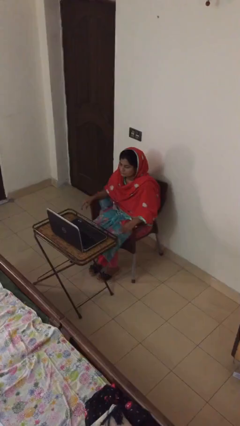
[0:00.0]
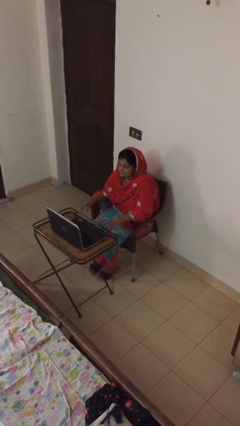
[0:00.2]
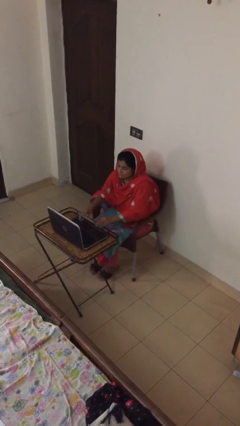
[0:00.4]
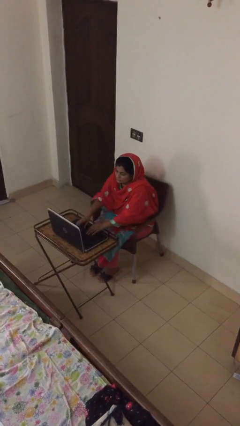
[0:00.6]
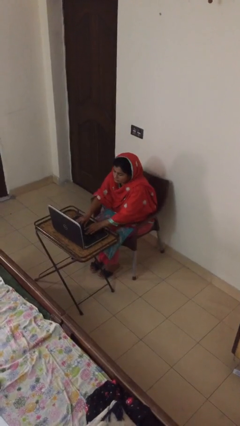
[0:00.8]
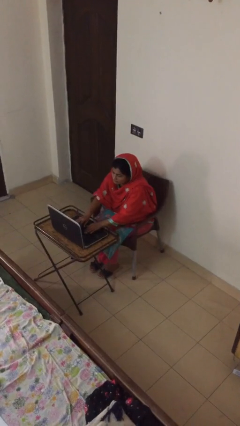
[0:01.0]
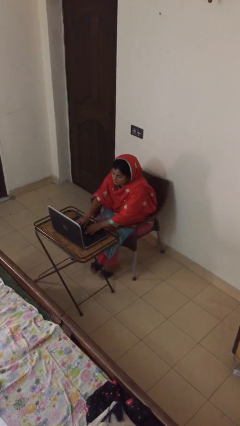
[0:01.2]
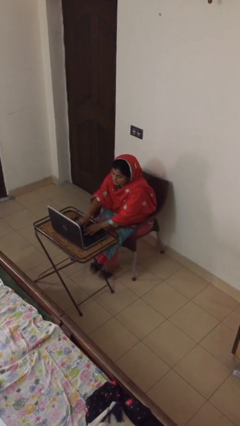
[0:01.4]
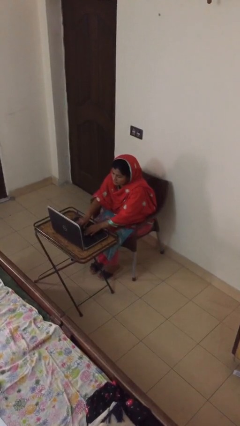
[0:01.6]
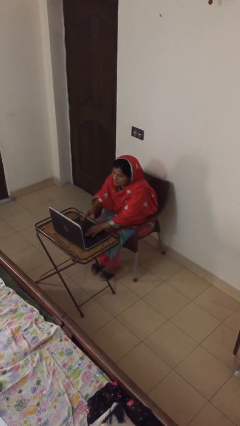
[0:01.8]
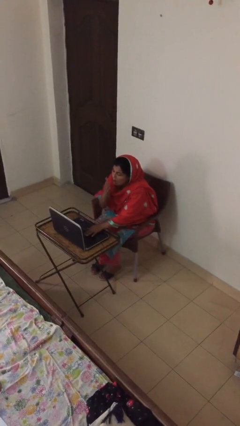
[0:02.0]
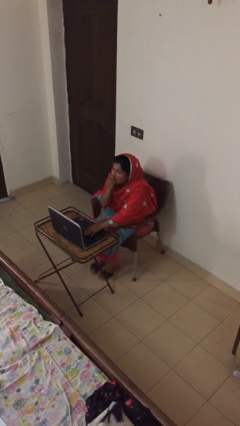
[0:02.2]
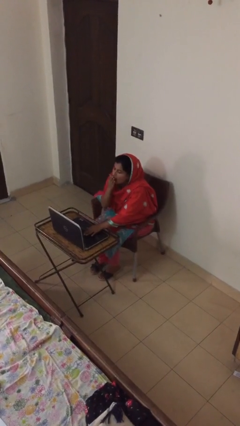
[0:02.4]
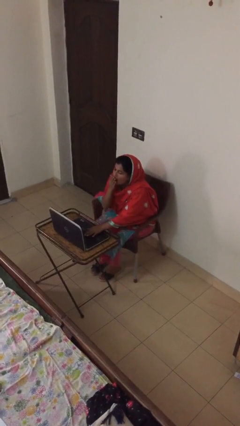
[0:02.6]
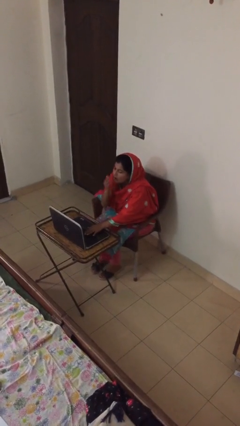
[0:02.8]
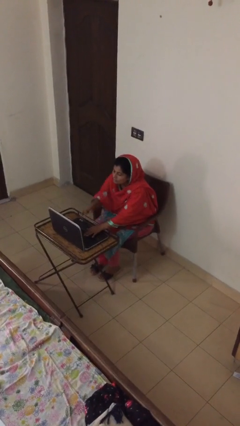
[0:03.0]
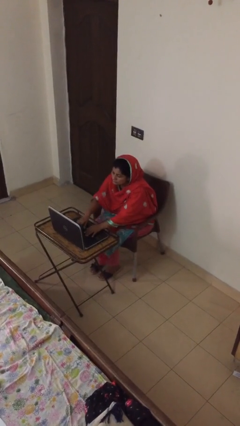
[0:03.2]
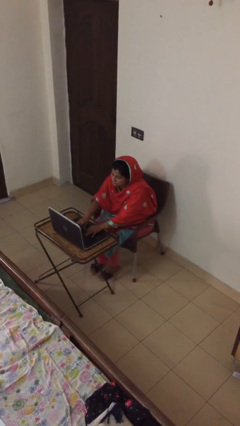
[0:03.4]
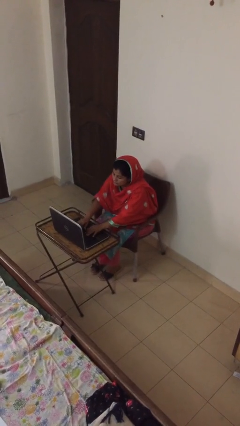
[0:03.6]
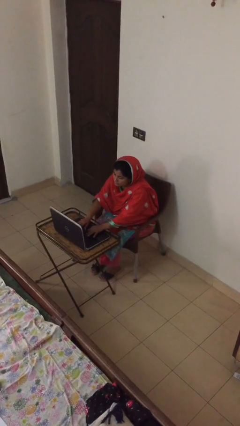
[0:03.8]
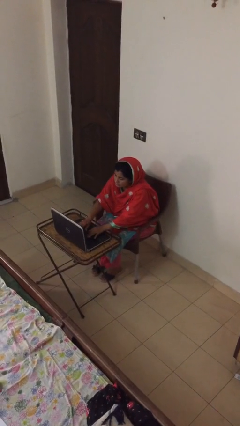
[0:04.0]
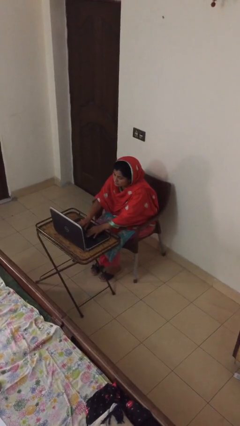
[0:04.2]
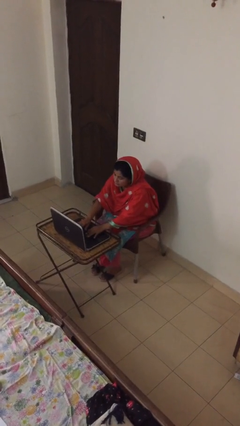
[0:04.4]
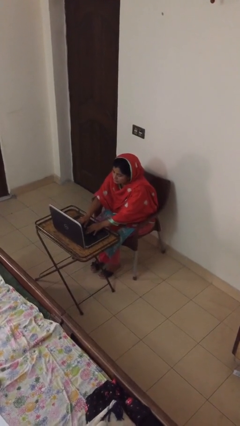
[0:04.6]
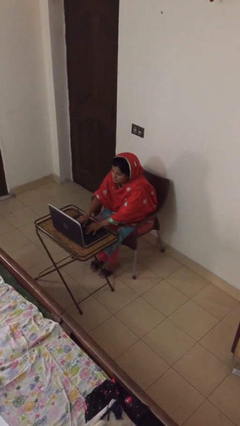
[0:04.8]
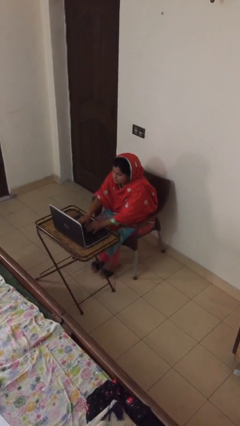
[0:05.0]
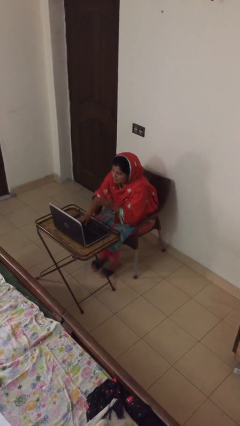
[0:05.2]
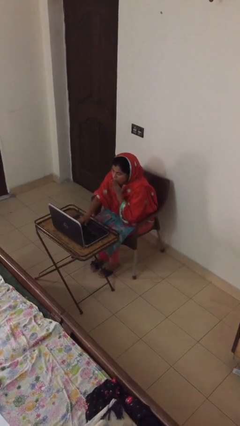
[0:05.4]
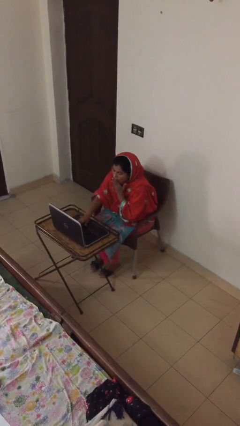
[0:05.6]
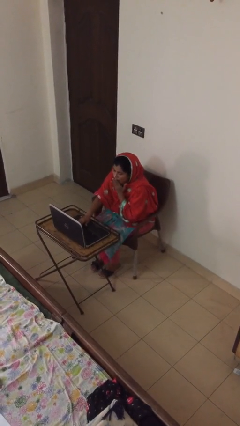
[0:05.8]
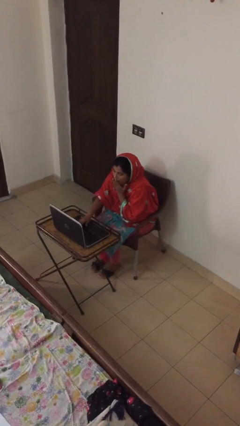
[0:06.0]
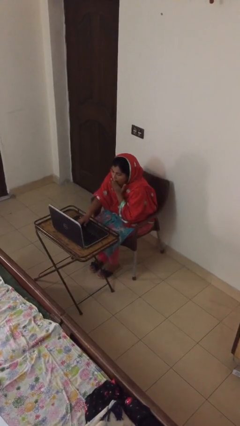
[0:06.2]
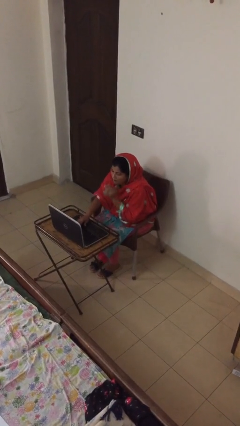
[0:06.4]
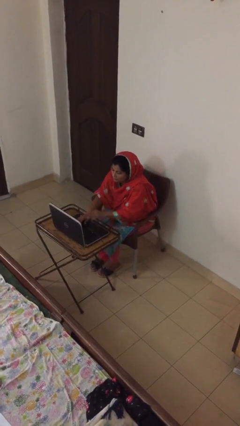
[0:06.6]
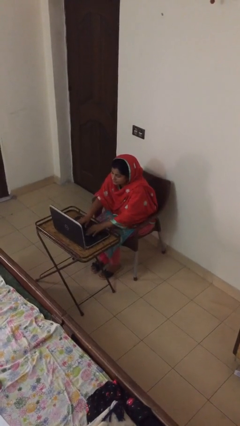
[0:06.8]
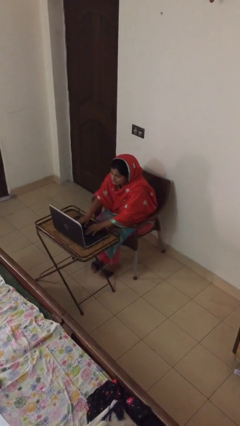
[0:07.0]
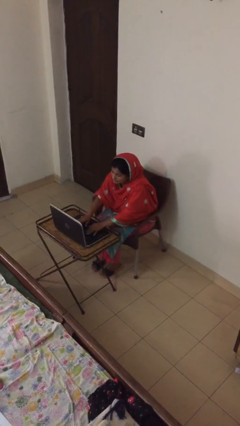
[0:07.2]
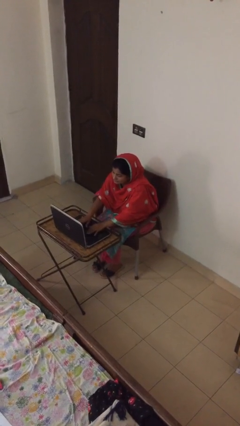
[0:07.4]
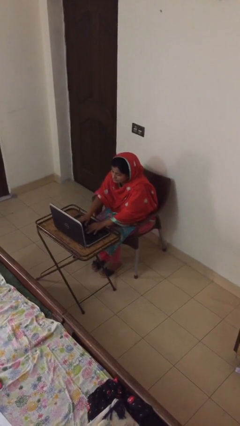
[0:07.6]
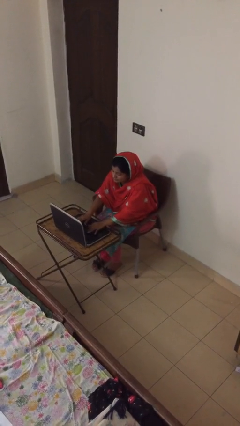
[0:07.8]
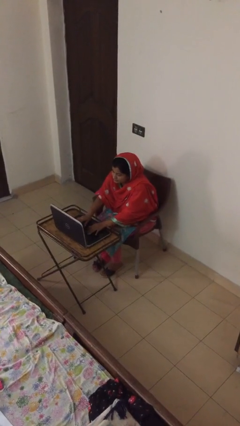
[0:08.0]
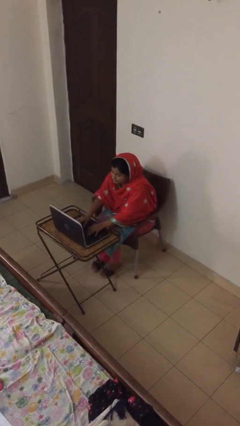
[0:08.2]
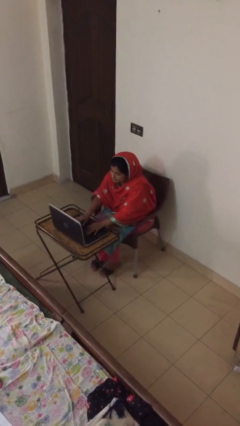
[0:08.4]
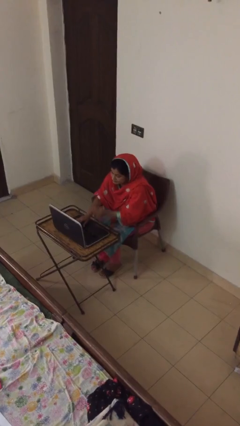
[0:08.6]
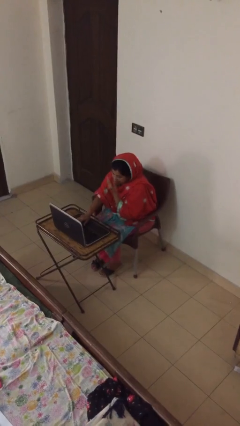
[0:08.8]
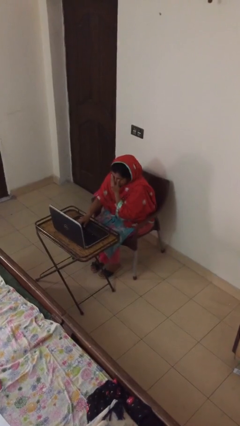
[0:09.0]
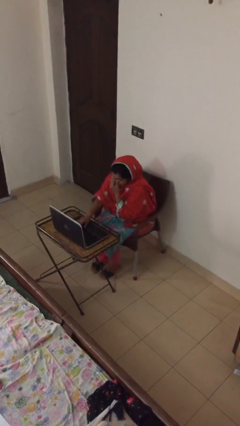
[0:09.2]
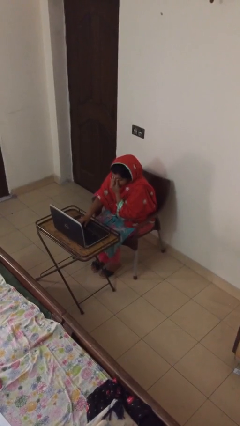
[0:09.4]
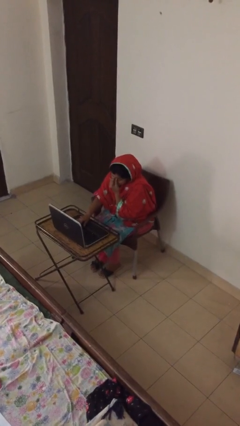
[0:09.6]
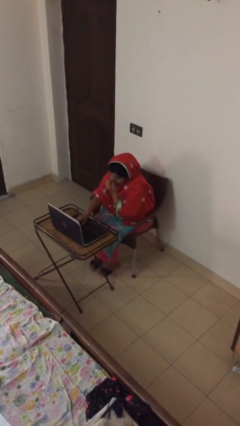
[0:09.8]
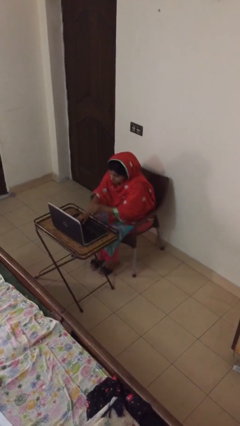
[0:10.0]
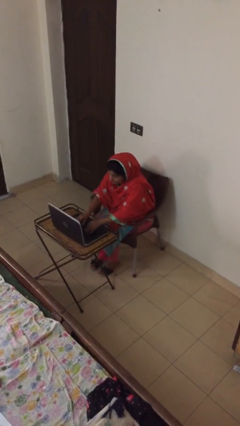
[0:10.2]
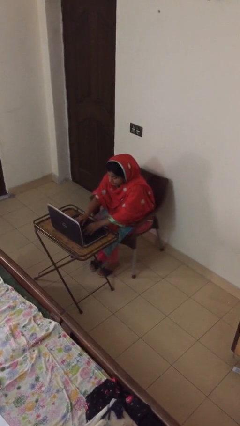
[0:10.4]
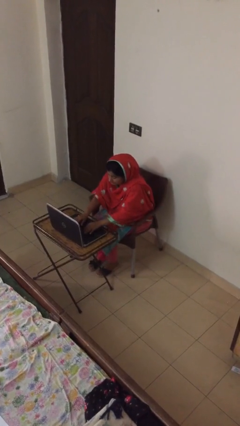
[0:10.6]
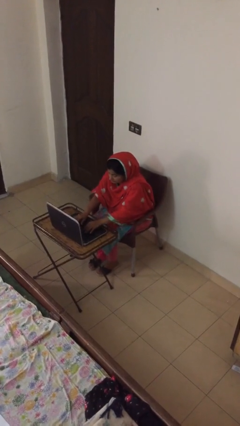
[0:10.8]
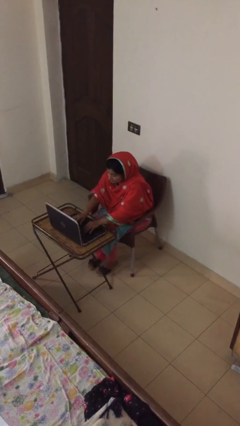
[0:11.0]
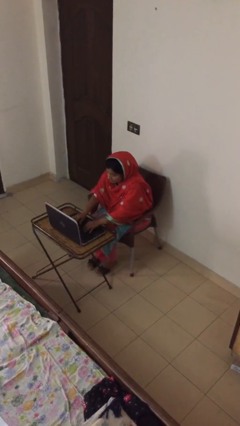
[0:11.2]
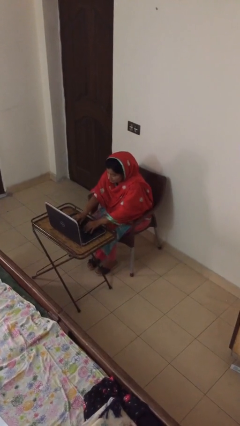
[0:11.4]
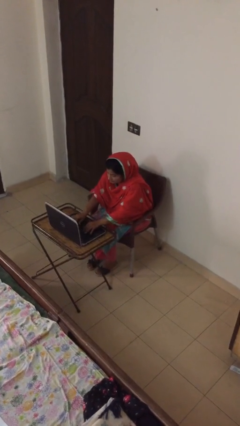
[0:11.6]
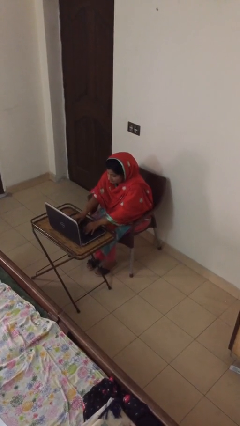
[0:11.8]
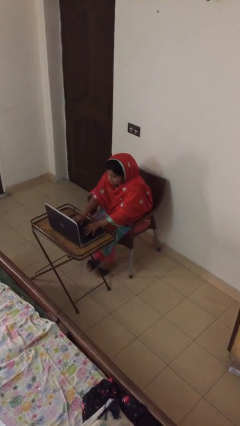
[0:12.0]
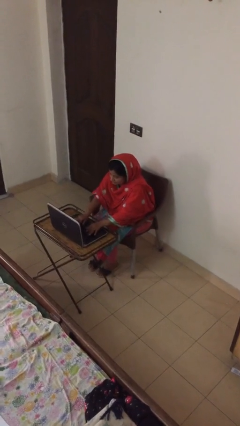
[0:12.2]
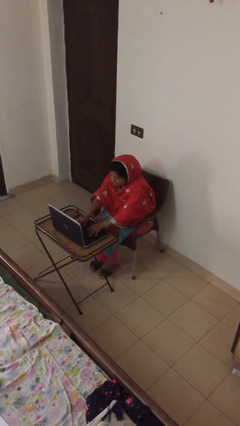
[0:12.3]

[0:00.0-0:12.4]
person interacts with laptop

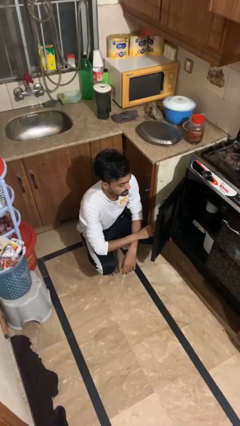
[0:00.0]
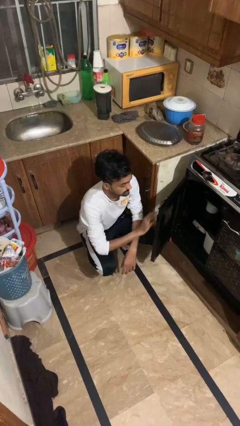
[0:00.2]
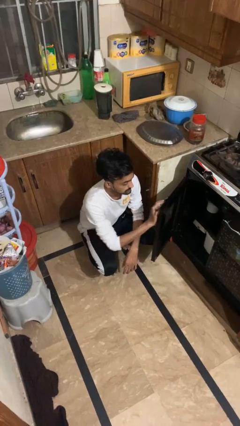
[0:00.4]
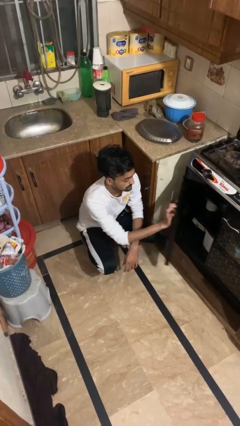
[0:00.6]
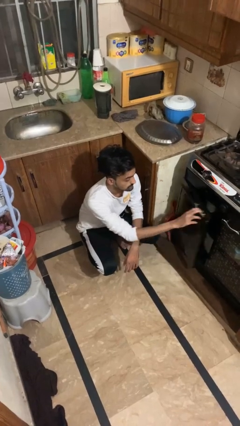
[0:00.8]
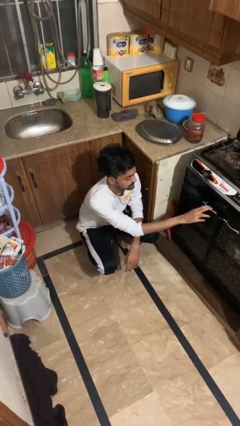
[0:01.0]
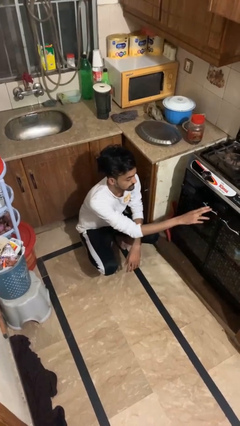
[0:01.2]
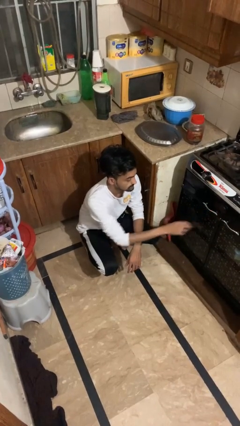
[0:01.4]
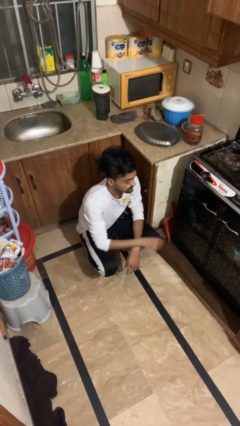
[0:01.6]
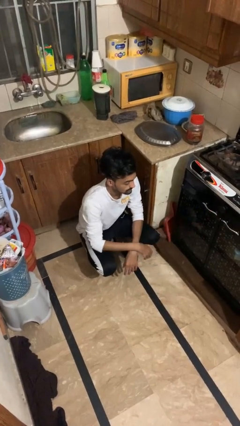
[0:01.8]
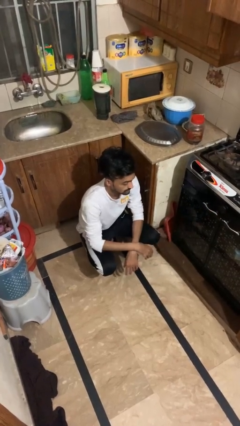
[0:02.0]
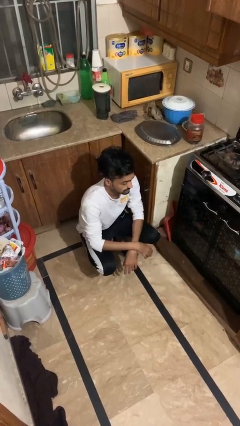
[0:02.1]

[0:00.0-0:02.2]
person closes oven door

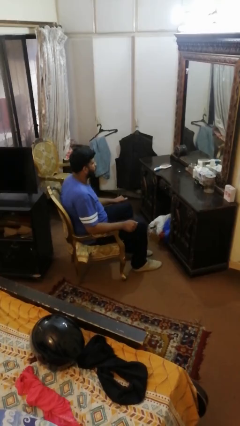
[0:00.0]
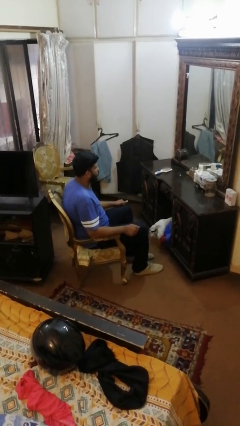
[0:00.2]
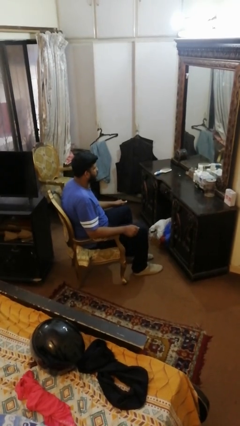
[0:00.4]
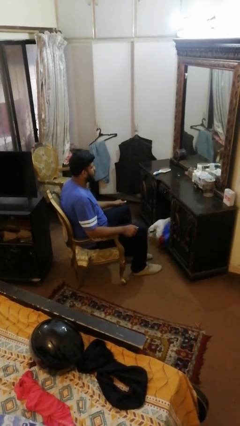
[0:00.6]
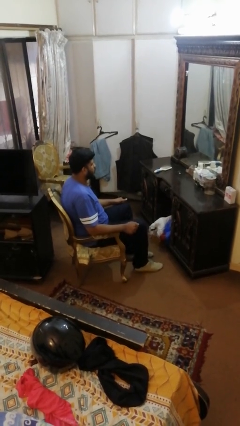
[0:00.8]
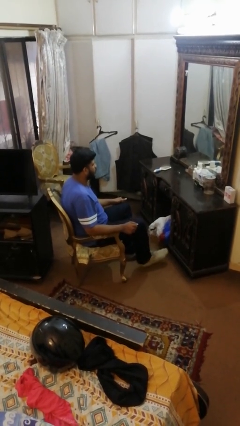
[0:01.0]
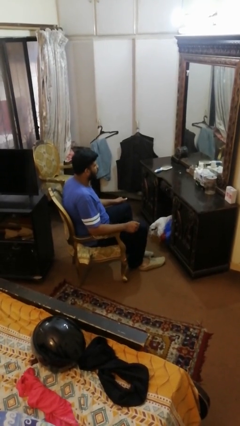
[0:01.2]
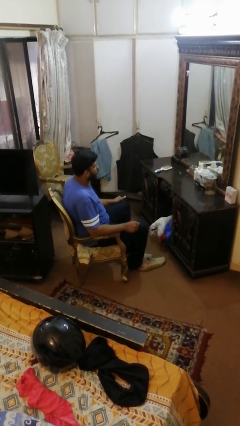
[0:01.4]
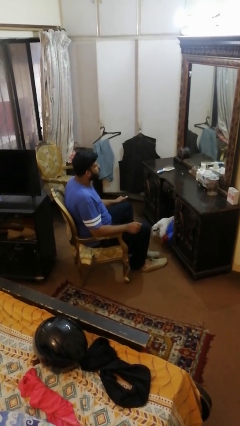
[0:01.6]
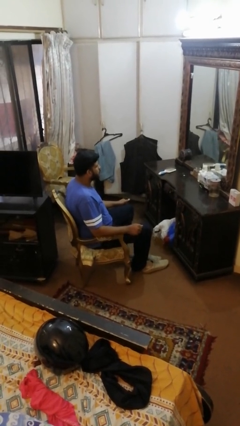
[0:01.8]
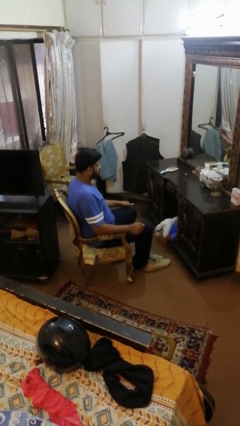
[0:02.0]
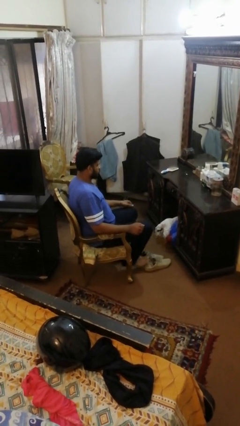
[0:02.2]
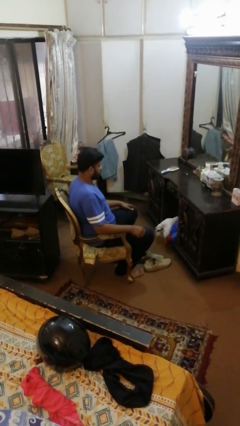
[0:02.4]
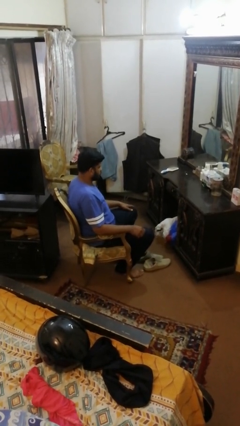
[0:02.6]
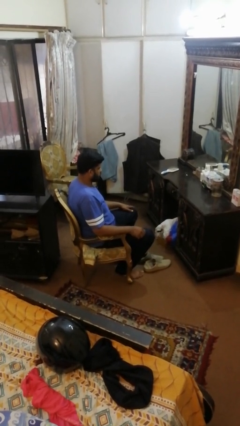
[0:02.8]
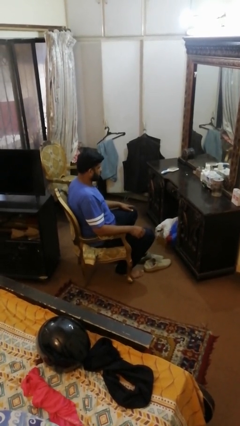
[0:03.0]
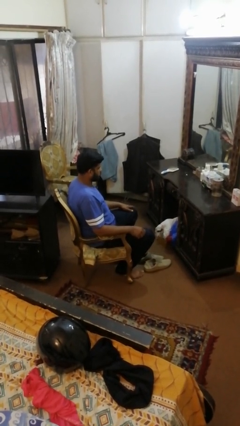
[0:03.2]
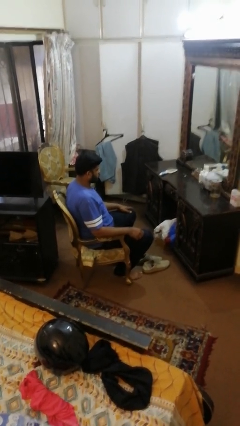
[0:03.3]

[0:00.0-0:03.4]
person takes off shoes

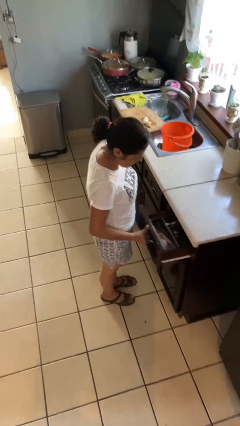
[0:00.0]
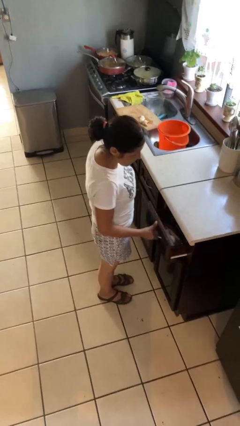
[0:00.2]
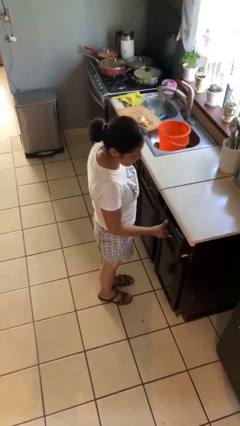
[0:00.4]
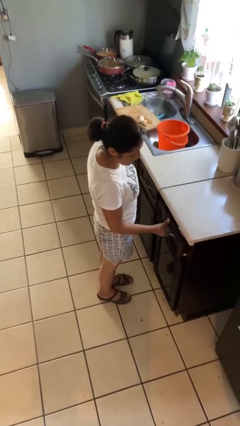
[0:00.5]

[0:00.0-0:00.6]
person closes kitchen drawer
